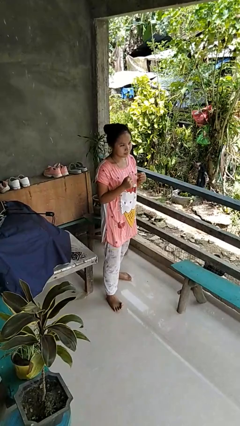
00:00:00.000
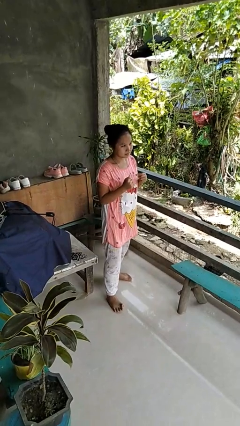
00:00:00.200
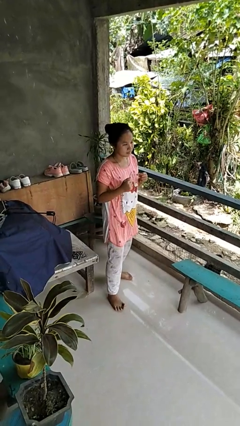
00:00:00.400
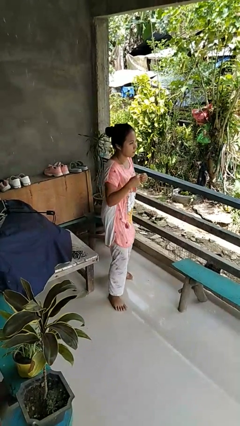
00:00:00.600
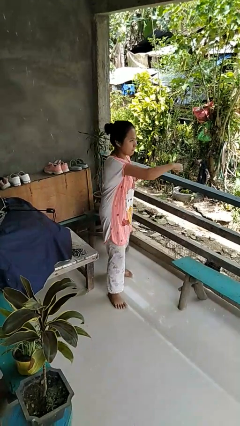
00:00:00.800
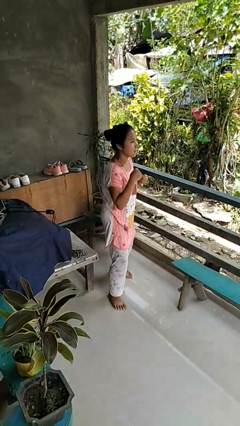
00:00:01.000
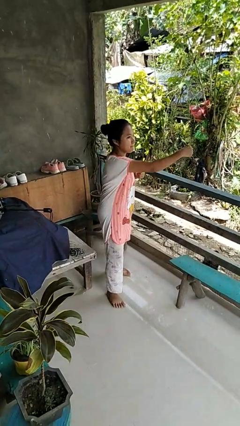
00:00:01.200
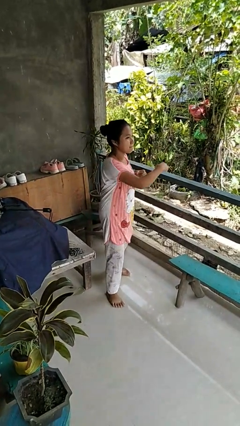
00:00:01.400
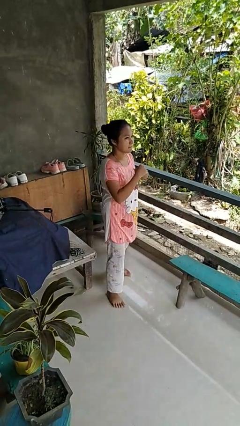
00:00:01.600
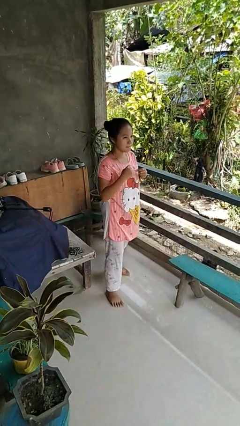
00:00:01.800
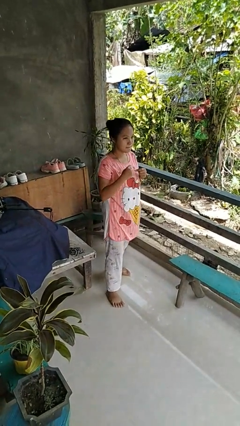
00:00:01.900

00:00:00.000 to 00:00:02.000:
person punches

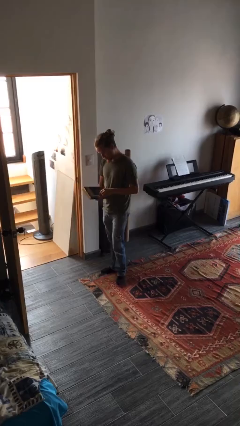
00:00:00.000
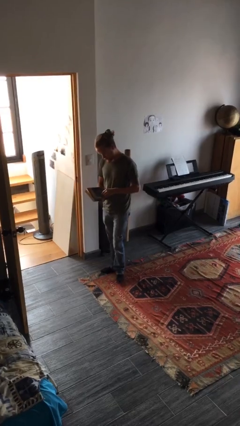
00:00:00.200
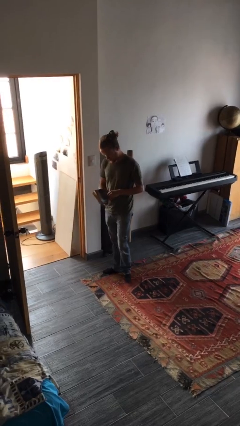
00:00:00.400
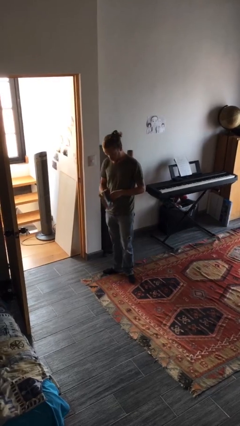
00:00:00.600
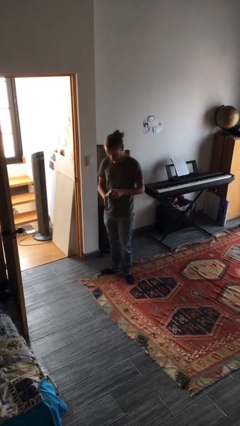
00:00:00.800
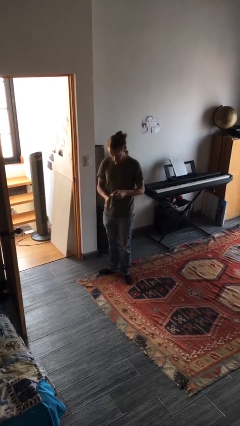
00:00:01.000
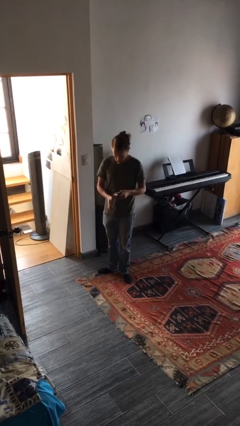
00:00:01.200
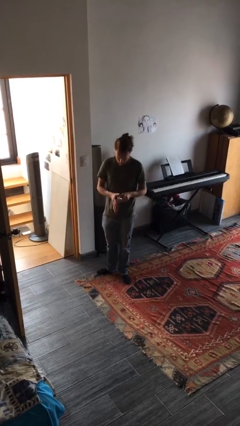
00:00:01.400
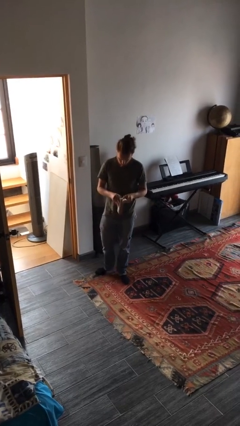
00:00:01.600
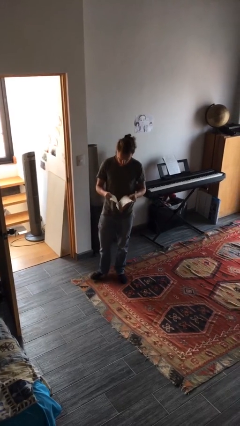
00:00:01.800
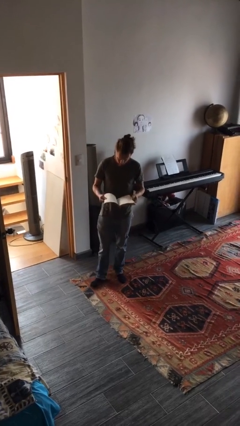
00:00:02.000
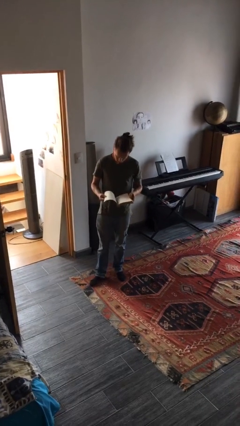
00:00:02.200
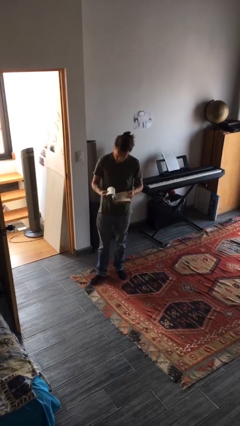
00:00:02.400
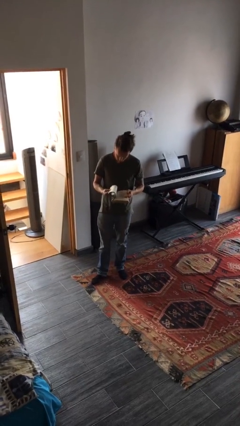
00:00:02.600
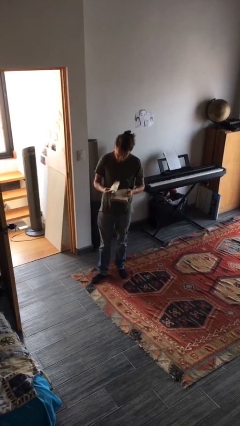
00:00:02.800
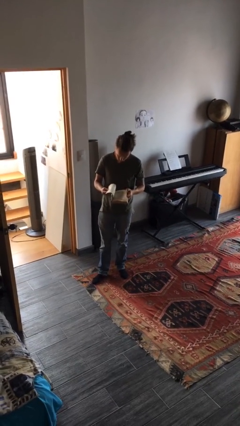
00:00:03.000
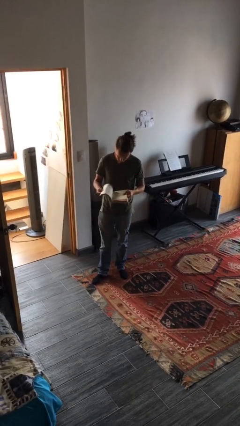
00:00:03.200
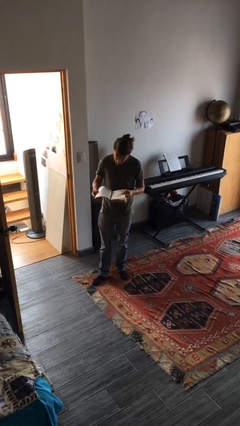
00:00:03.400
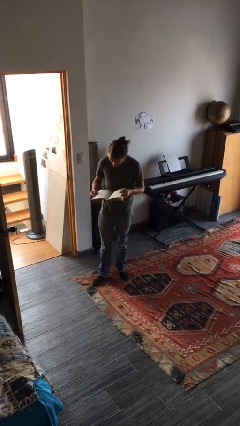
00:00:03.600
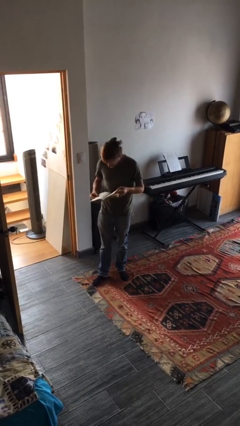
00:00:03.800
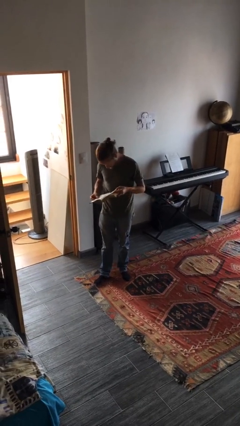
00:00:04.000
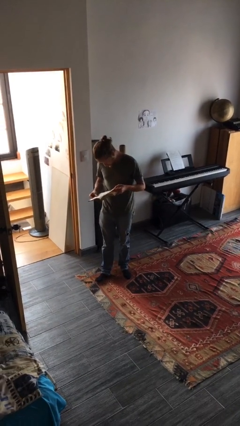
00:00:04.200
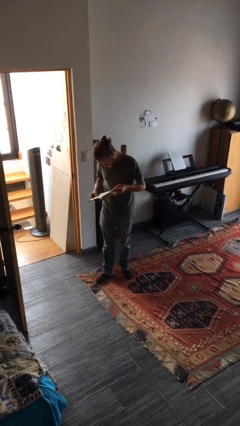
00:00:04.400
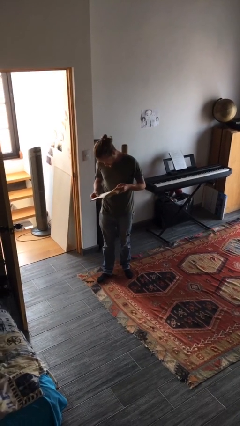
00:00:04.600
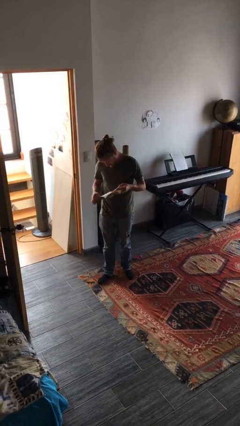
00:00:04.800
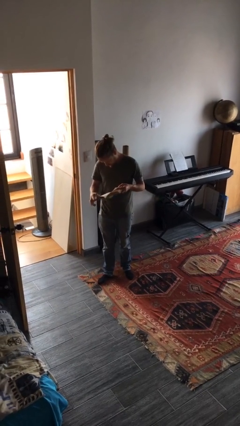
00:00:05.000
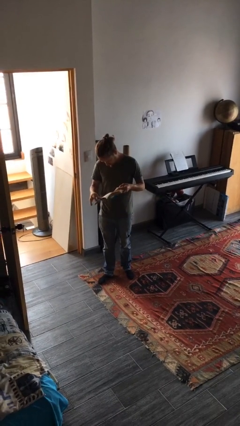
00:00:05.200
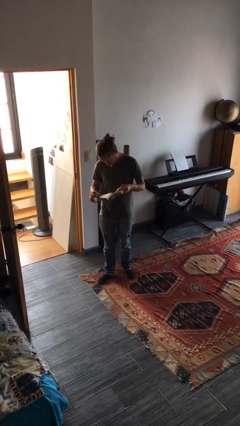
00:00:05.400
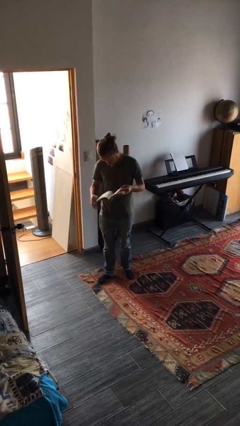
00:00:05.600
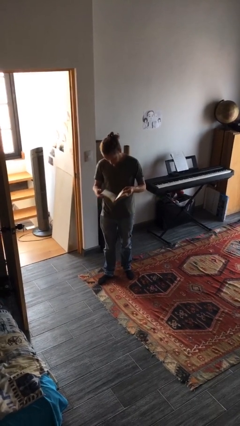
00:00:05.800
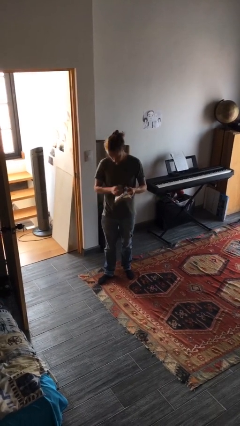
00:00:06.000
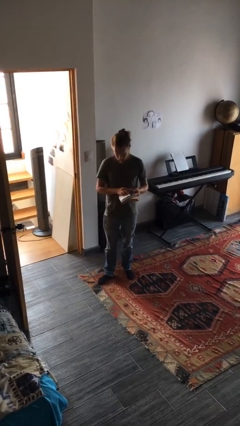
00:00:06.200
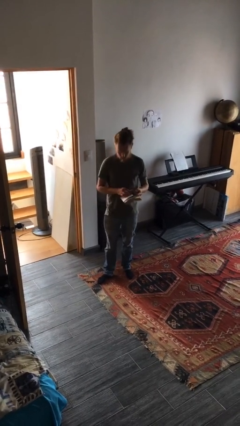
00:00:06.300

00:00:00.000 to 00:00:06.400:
person reads book

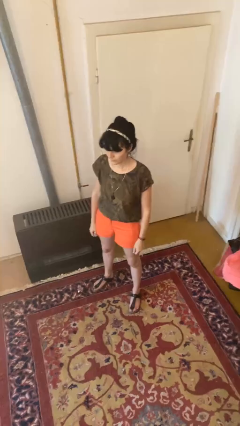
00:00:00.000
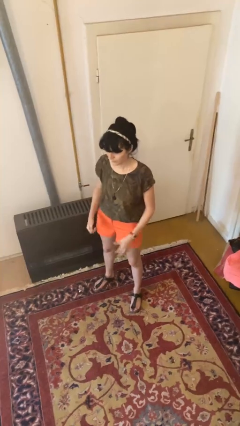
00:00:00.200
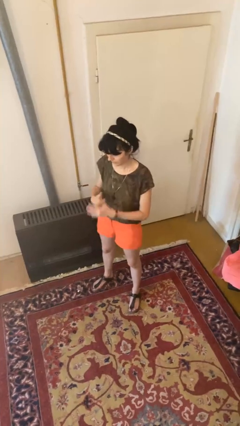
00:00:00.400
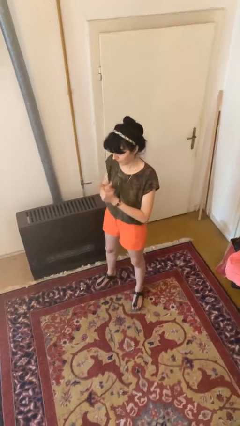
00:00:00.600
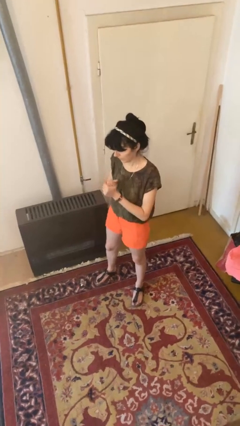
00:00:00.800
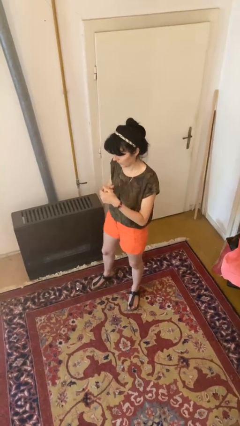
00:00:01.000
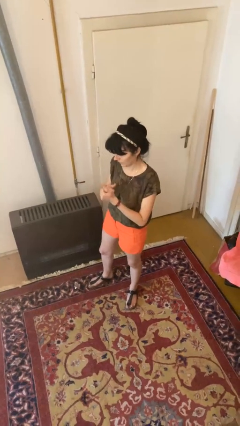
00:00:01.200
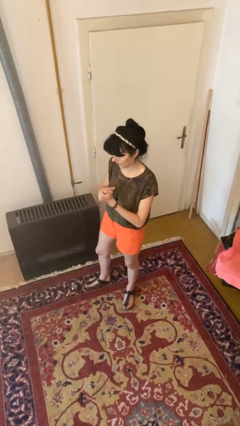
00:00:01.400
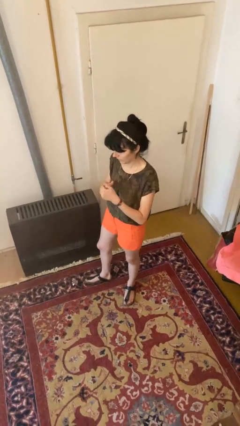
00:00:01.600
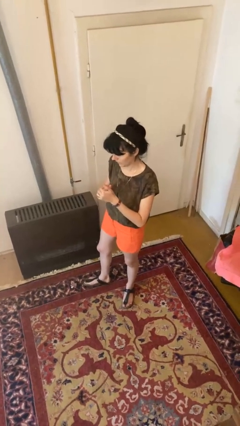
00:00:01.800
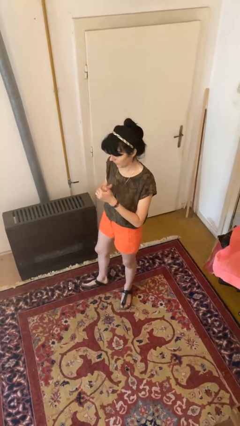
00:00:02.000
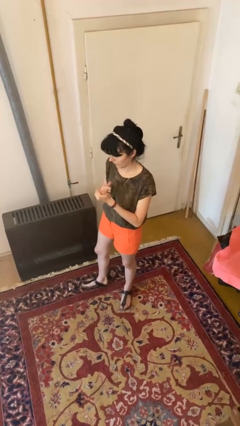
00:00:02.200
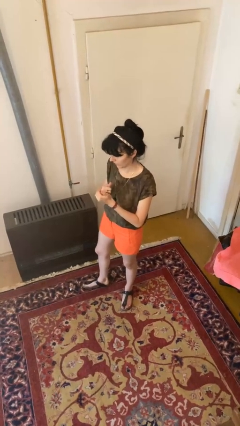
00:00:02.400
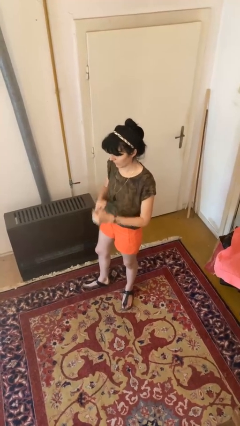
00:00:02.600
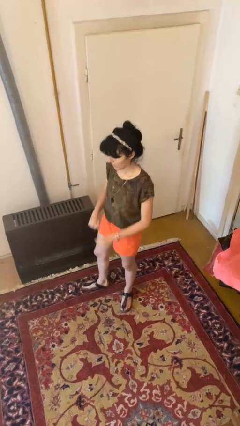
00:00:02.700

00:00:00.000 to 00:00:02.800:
person cracks knuckles

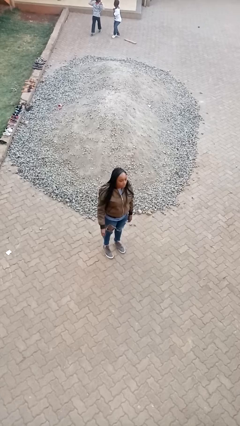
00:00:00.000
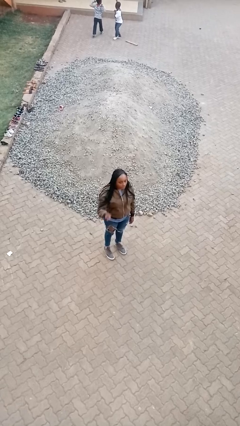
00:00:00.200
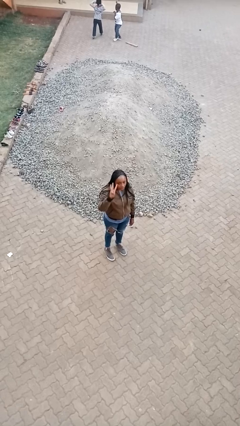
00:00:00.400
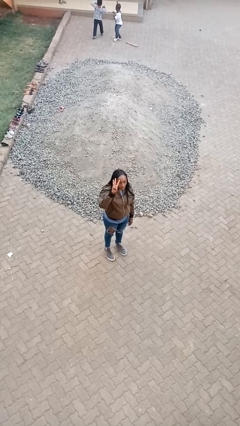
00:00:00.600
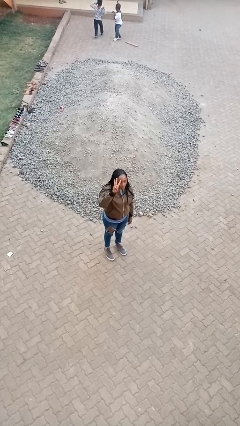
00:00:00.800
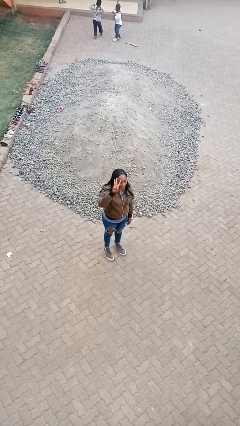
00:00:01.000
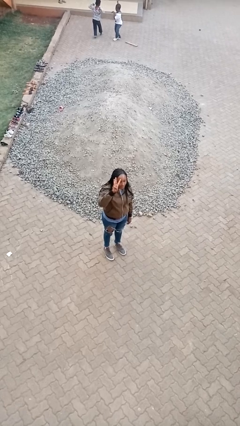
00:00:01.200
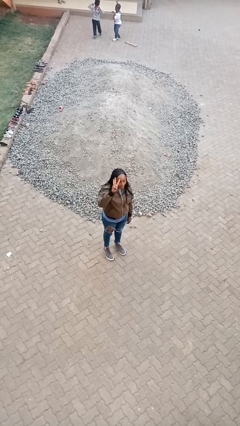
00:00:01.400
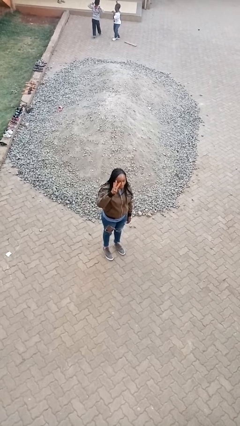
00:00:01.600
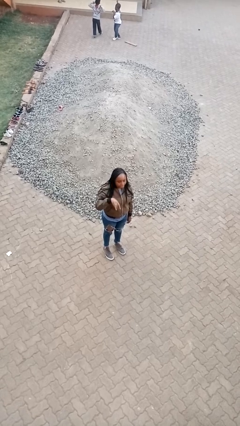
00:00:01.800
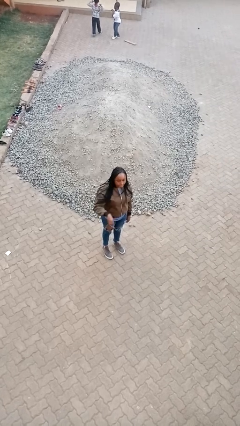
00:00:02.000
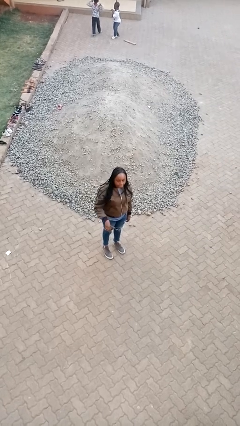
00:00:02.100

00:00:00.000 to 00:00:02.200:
person gestures number three

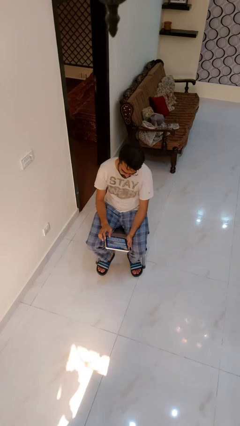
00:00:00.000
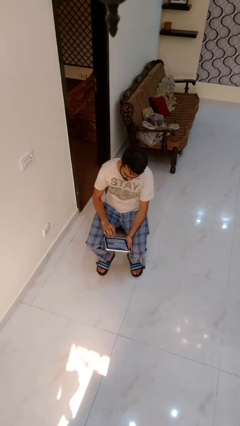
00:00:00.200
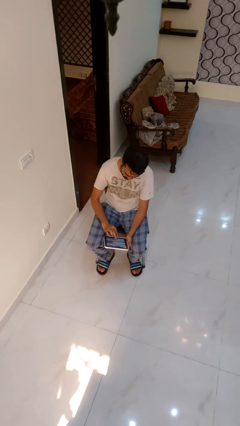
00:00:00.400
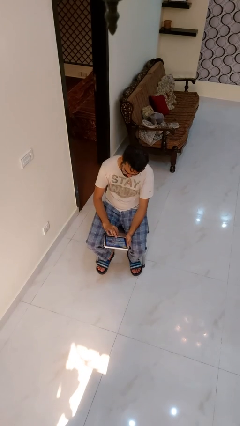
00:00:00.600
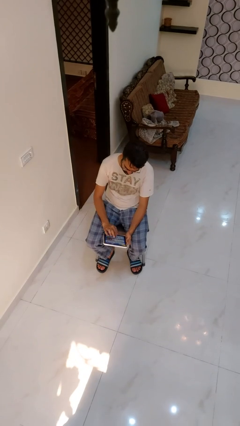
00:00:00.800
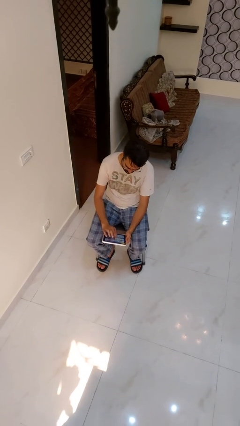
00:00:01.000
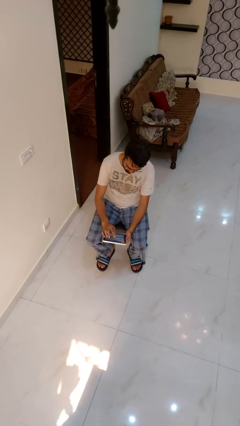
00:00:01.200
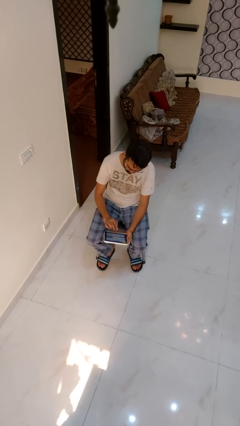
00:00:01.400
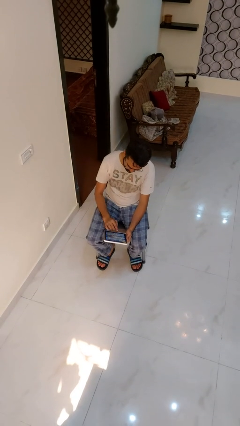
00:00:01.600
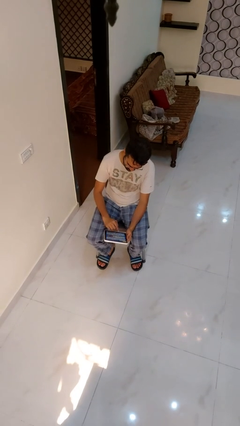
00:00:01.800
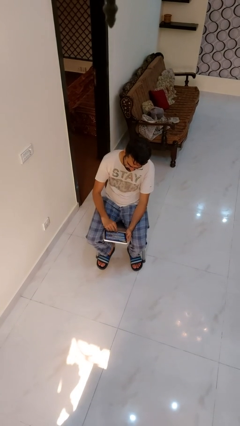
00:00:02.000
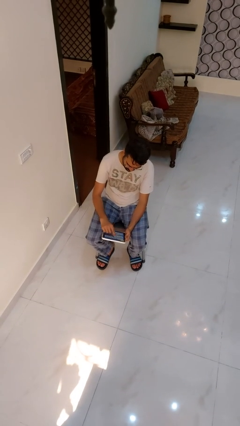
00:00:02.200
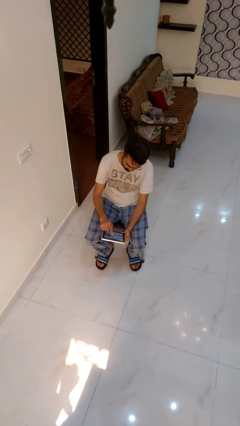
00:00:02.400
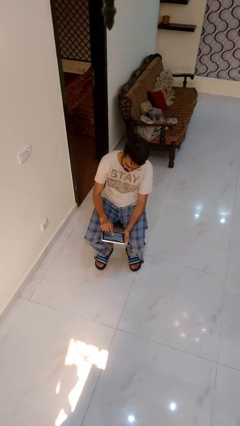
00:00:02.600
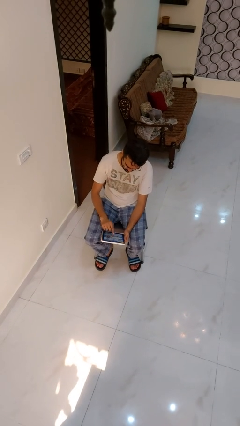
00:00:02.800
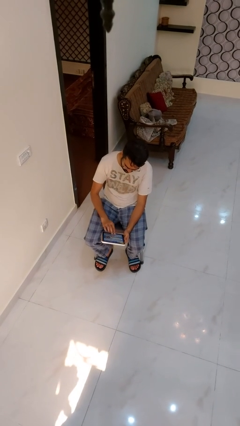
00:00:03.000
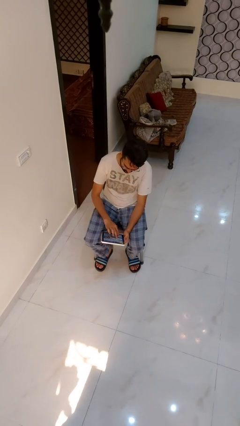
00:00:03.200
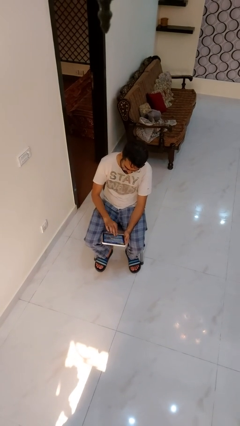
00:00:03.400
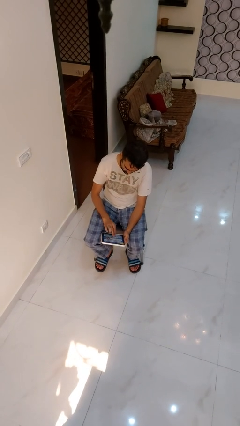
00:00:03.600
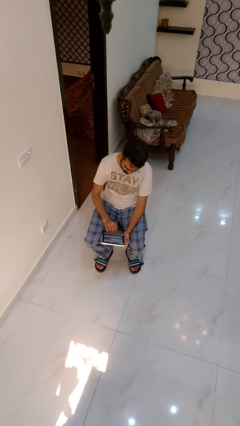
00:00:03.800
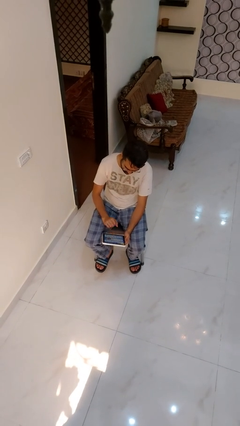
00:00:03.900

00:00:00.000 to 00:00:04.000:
person interacts with tablet

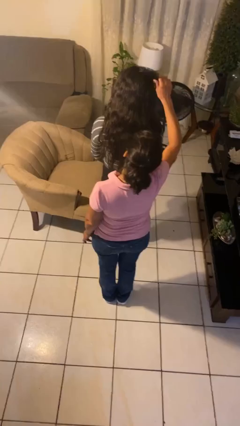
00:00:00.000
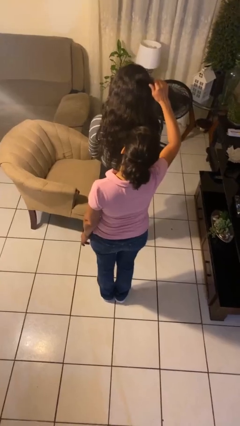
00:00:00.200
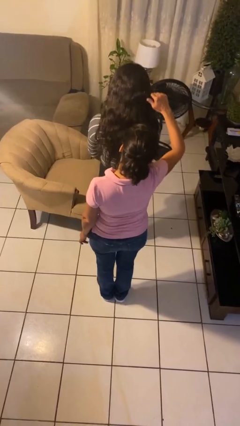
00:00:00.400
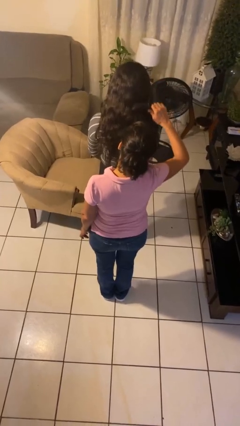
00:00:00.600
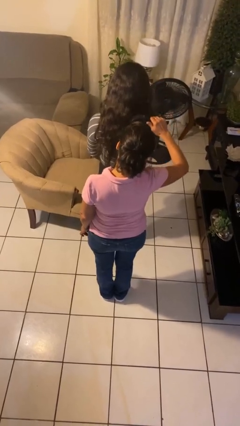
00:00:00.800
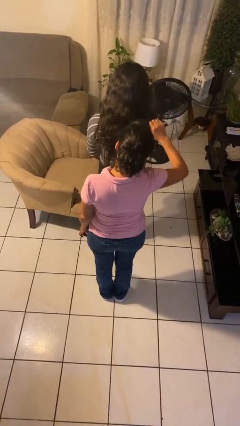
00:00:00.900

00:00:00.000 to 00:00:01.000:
person brushes hair of person
